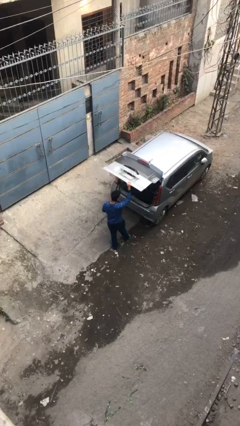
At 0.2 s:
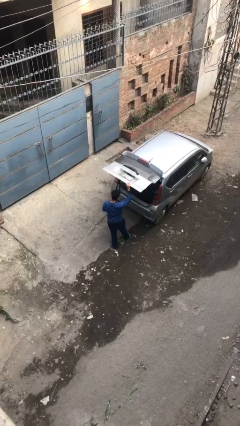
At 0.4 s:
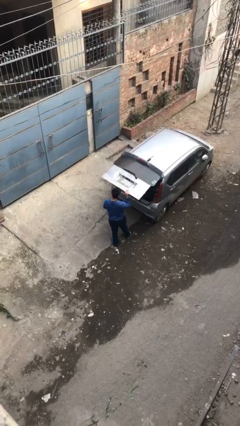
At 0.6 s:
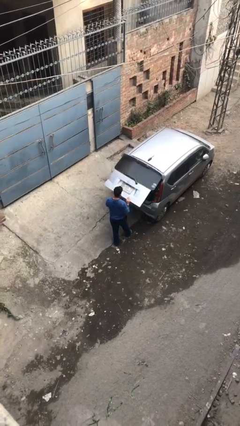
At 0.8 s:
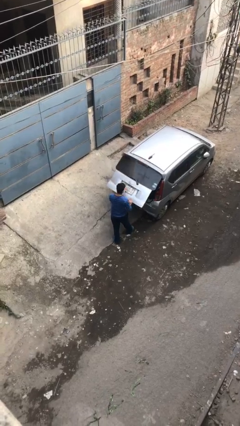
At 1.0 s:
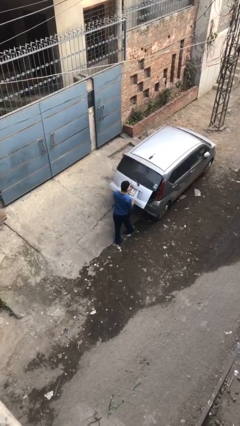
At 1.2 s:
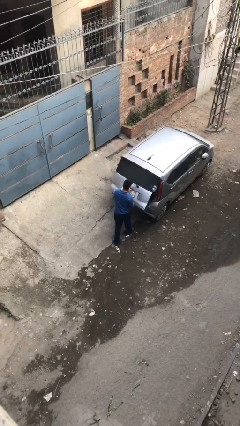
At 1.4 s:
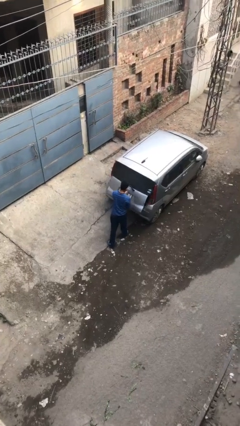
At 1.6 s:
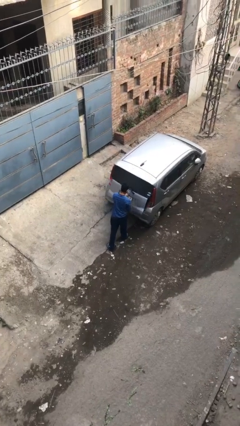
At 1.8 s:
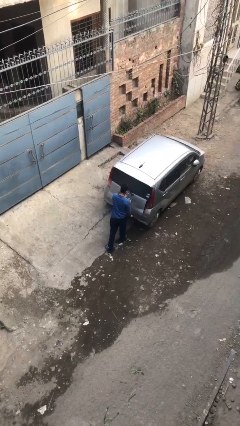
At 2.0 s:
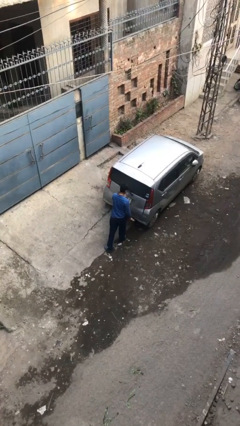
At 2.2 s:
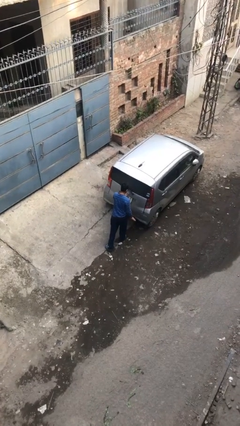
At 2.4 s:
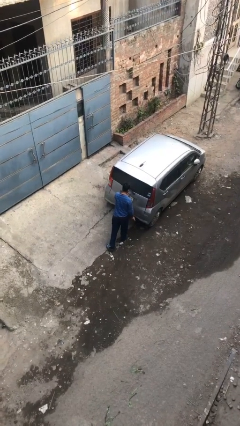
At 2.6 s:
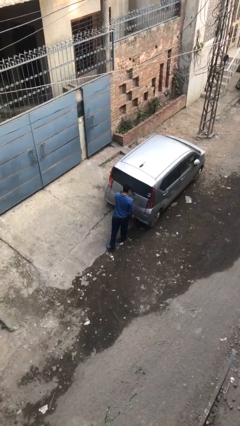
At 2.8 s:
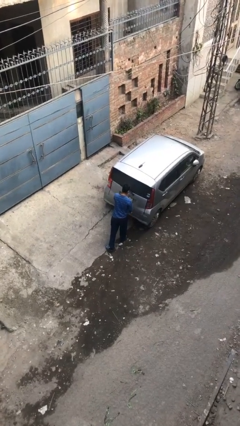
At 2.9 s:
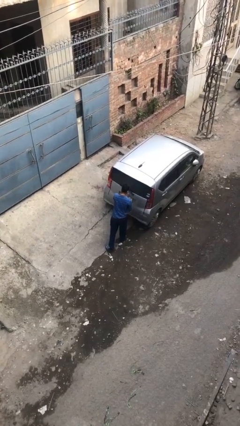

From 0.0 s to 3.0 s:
person closes car trunk

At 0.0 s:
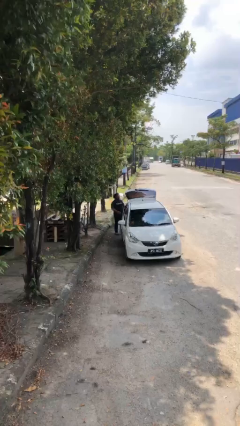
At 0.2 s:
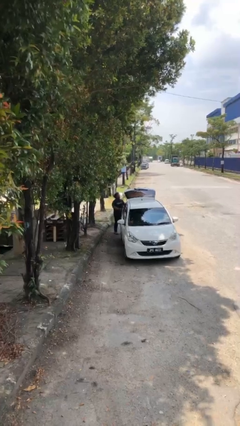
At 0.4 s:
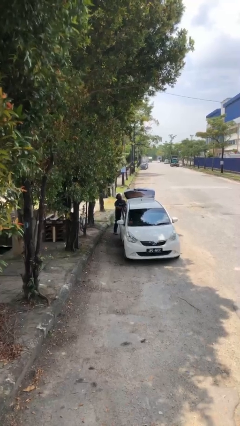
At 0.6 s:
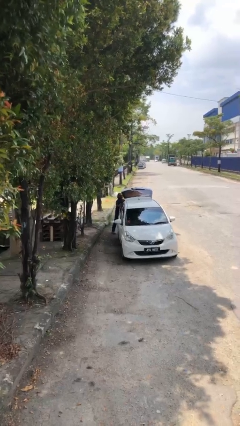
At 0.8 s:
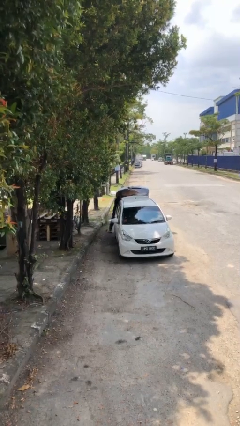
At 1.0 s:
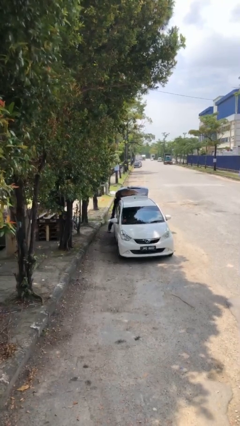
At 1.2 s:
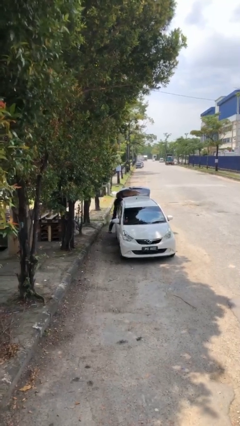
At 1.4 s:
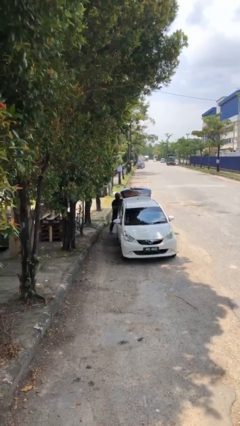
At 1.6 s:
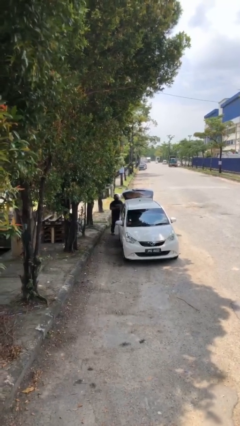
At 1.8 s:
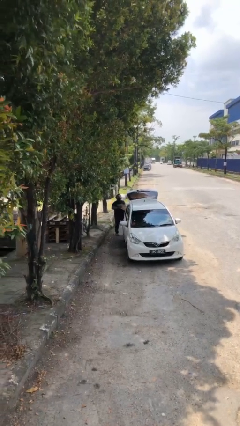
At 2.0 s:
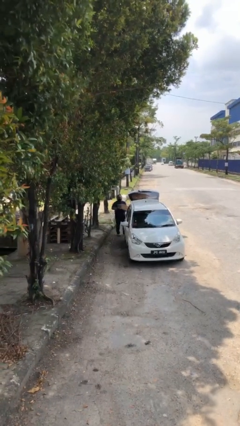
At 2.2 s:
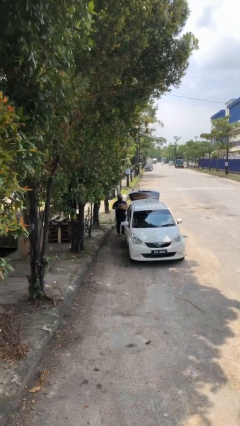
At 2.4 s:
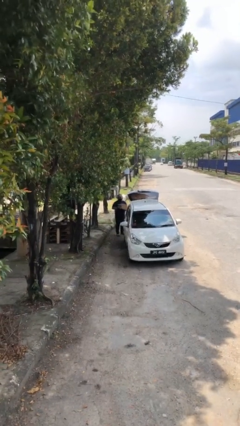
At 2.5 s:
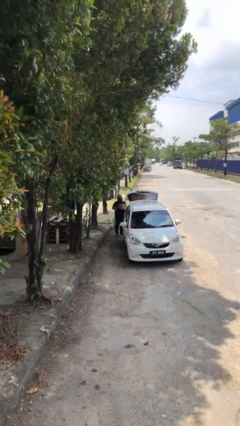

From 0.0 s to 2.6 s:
person unloads car

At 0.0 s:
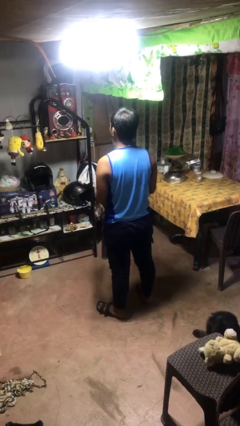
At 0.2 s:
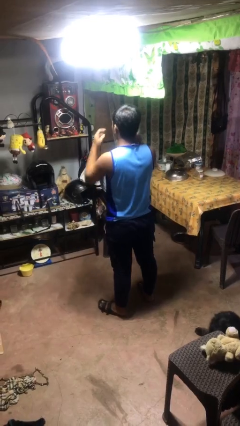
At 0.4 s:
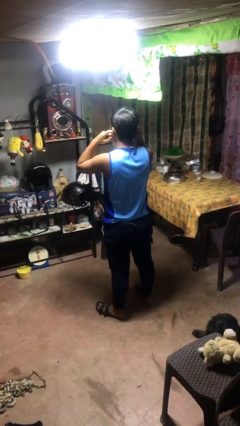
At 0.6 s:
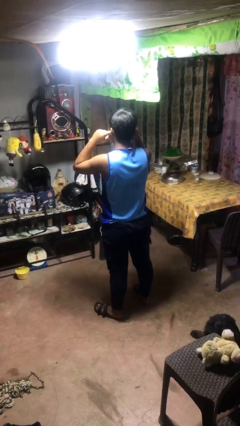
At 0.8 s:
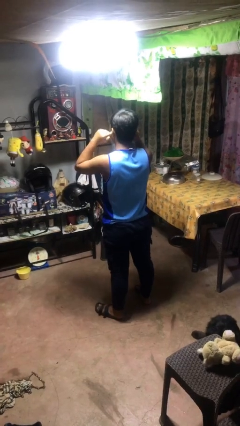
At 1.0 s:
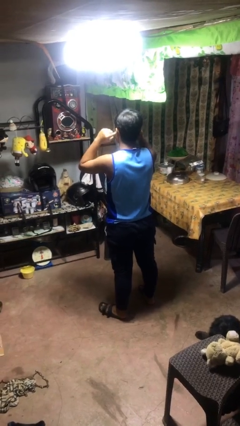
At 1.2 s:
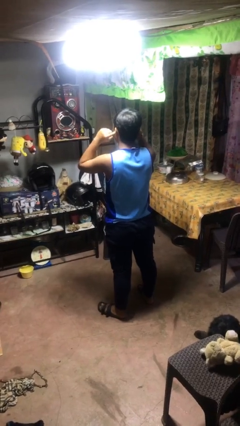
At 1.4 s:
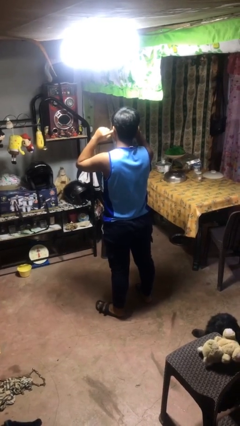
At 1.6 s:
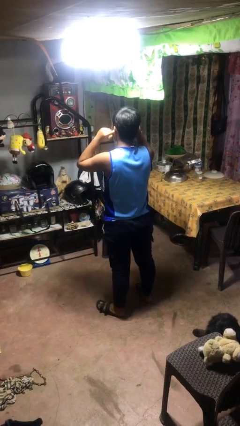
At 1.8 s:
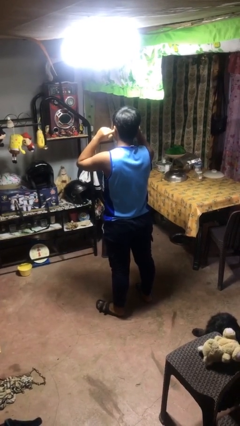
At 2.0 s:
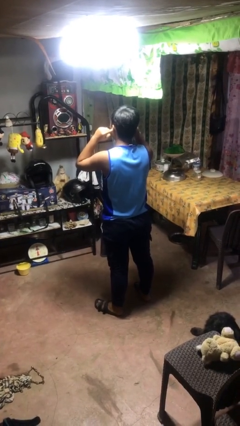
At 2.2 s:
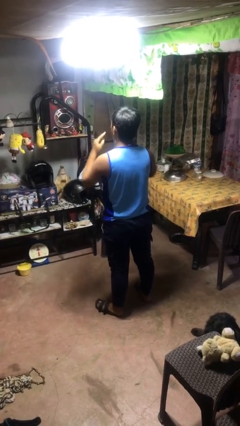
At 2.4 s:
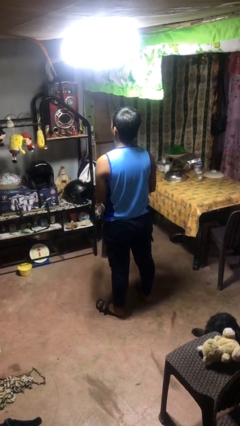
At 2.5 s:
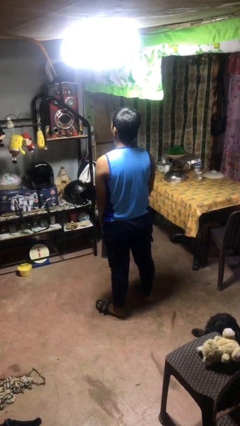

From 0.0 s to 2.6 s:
person puts fingers in ear

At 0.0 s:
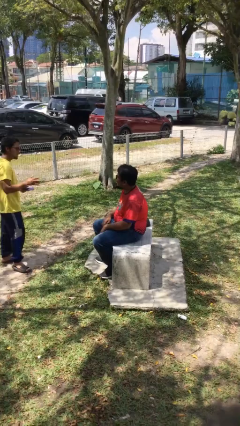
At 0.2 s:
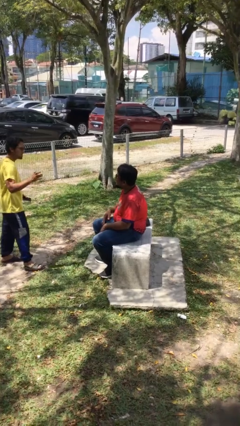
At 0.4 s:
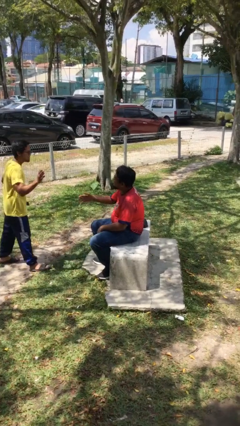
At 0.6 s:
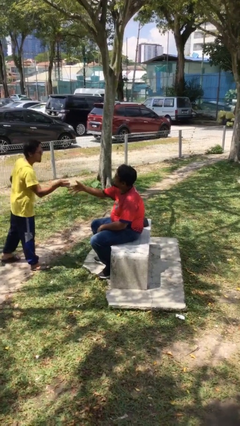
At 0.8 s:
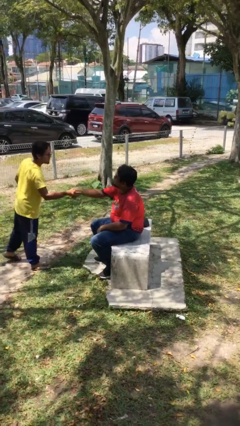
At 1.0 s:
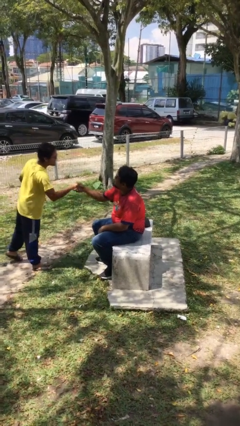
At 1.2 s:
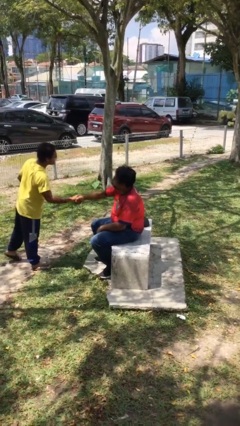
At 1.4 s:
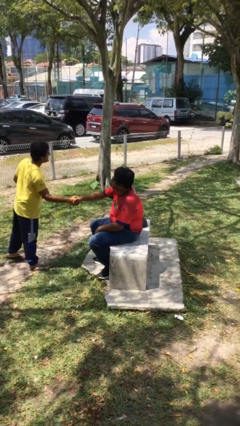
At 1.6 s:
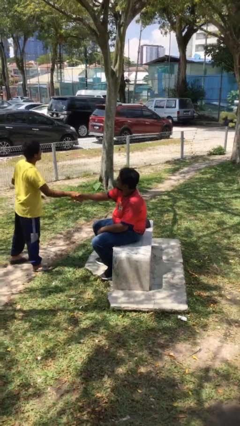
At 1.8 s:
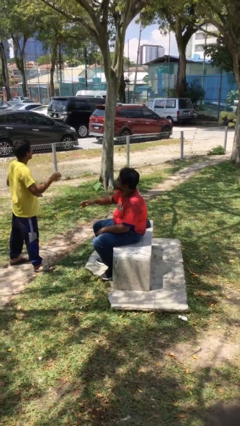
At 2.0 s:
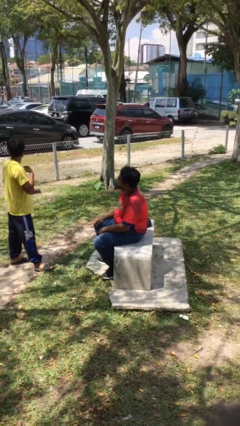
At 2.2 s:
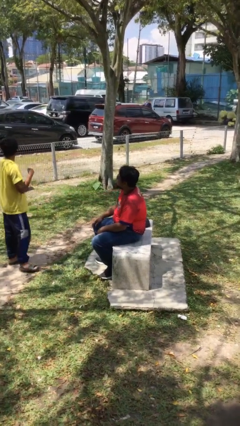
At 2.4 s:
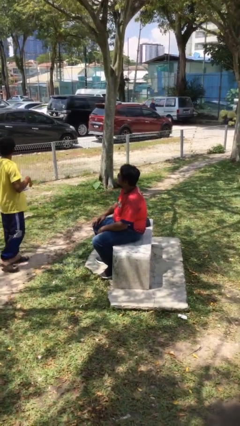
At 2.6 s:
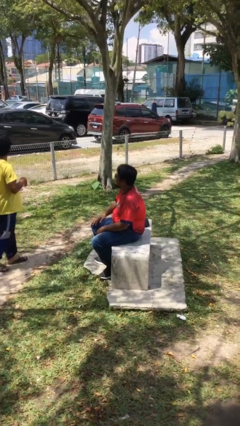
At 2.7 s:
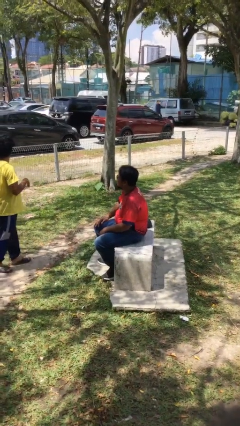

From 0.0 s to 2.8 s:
person shakes hand

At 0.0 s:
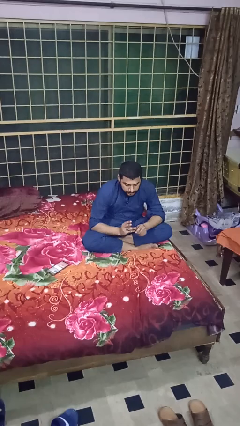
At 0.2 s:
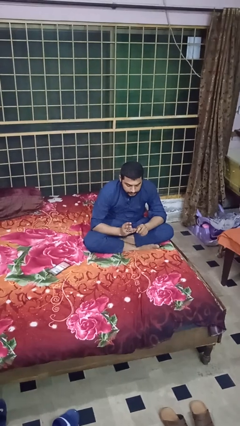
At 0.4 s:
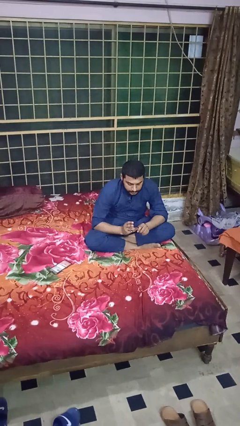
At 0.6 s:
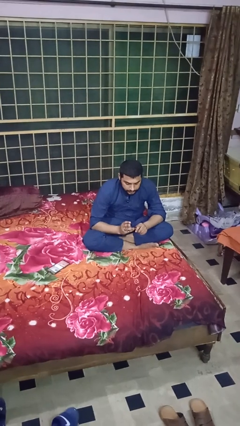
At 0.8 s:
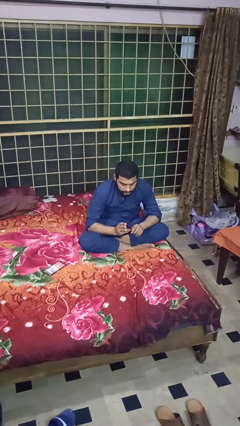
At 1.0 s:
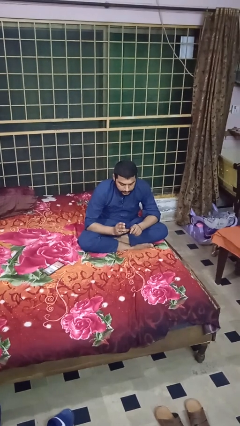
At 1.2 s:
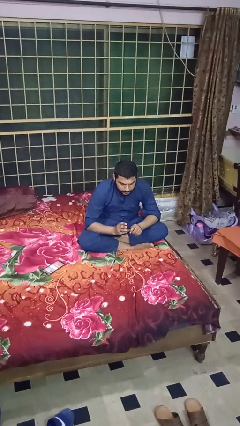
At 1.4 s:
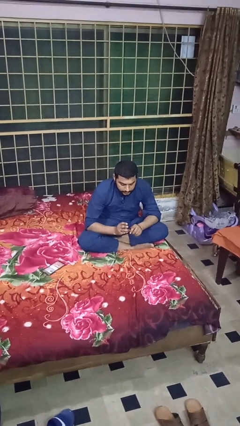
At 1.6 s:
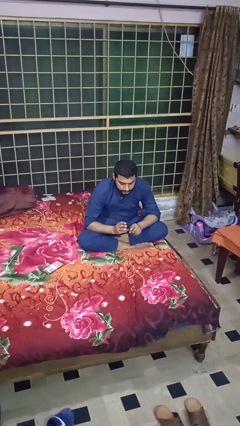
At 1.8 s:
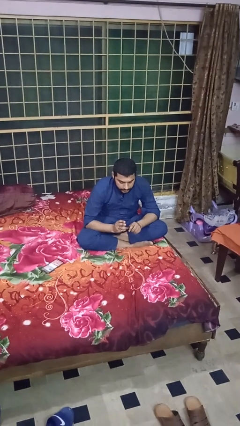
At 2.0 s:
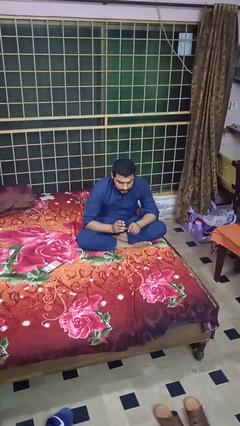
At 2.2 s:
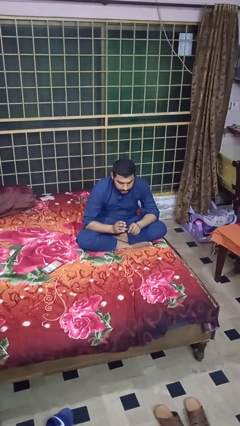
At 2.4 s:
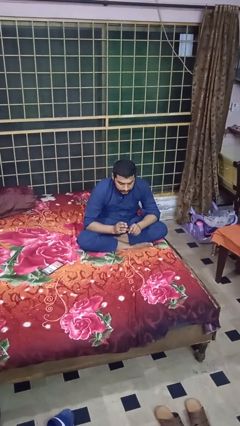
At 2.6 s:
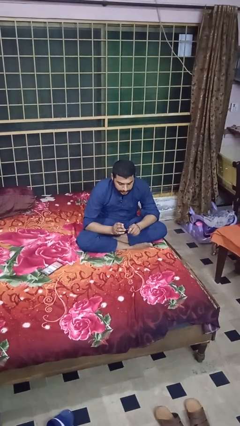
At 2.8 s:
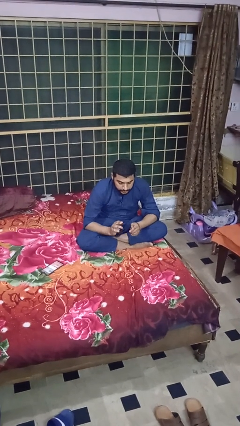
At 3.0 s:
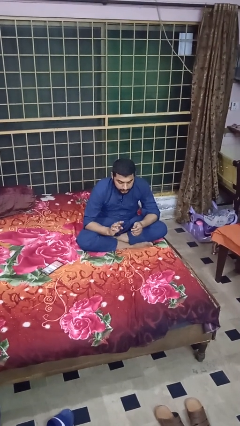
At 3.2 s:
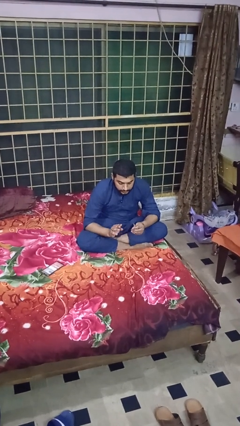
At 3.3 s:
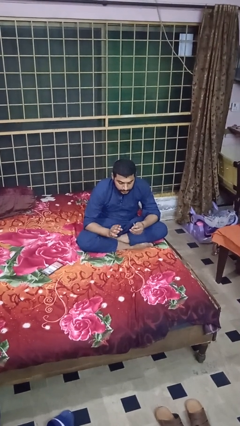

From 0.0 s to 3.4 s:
person files fingernails

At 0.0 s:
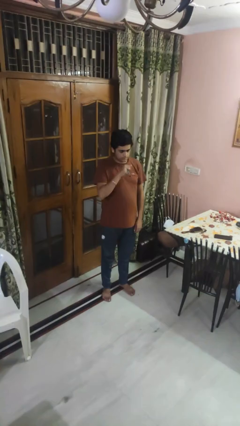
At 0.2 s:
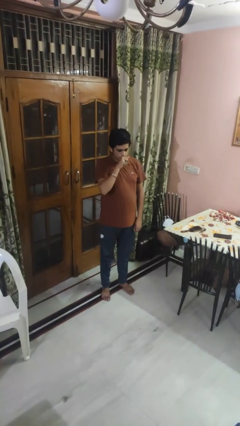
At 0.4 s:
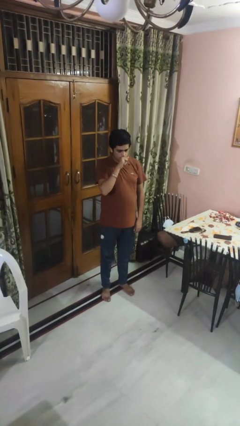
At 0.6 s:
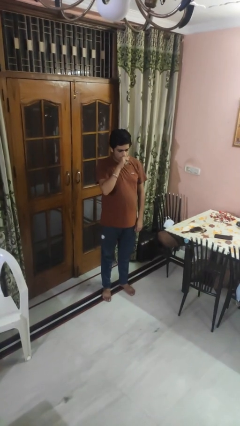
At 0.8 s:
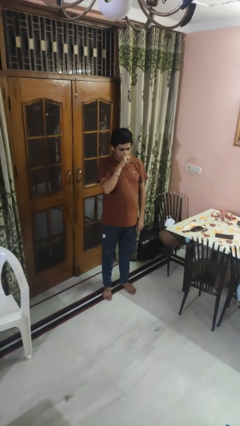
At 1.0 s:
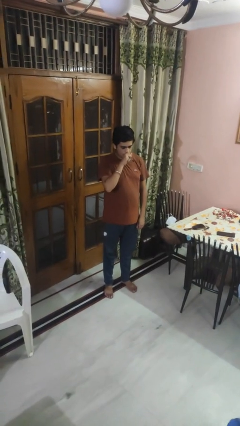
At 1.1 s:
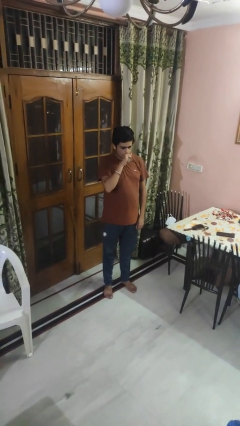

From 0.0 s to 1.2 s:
person vapes

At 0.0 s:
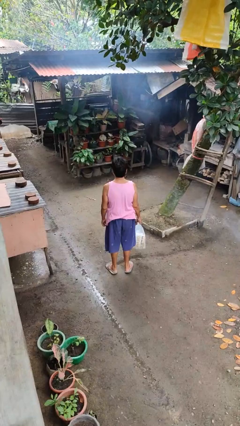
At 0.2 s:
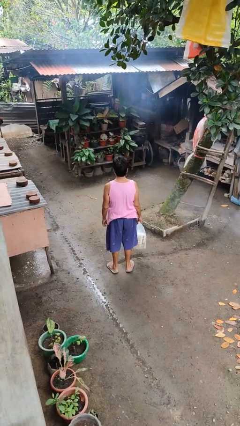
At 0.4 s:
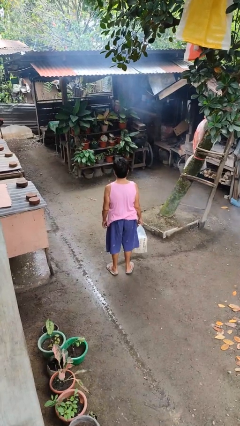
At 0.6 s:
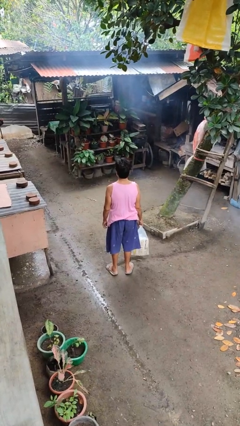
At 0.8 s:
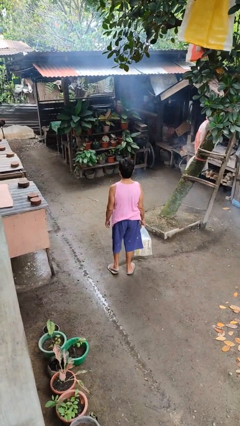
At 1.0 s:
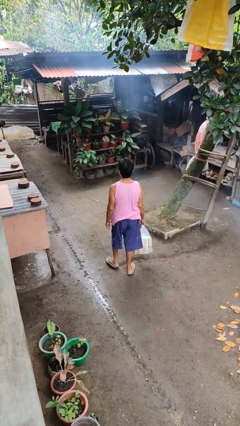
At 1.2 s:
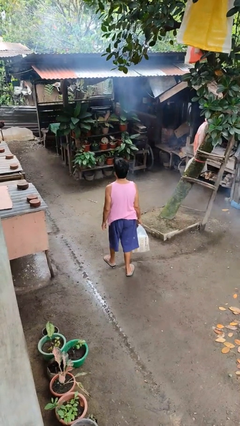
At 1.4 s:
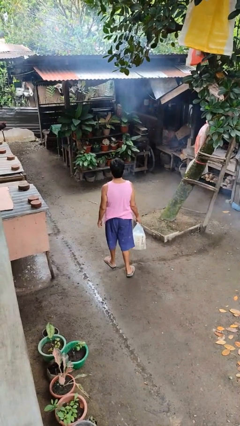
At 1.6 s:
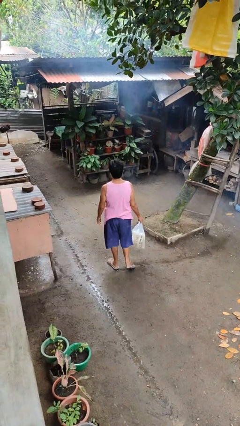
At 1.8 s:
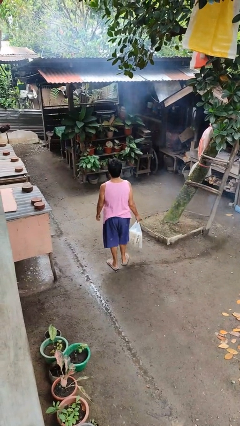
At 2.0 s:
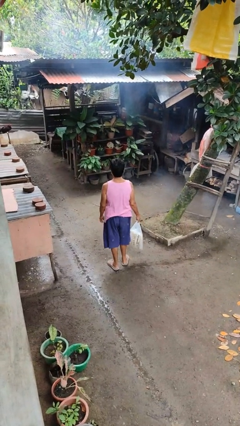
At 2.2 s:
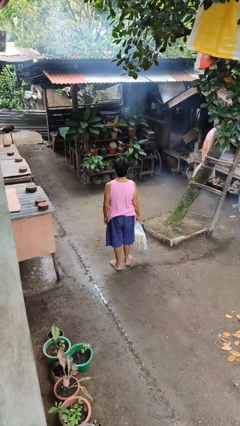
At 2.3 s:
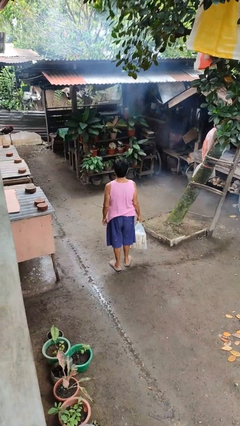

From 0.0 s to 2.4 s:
person carries groceries
